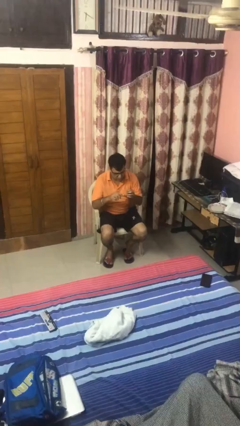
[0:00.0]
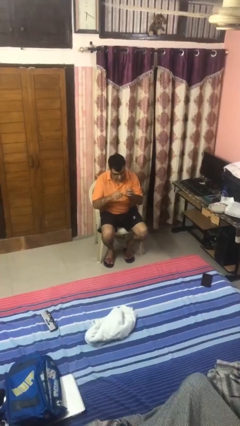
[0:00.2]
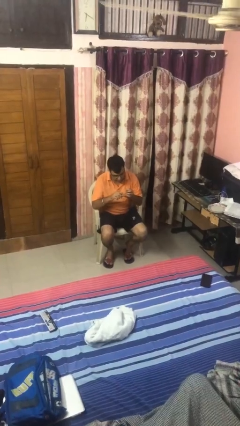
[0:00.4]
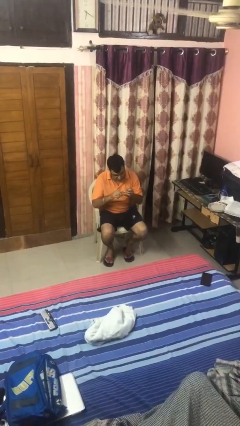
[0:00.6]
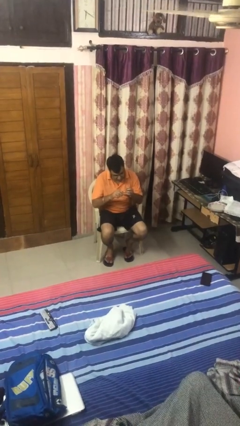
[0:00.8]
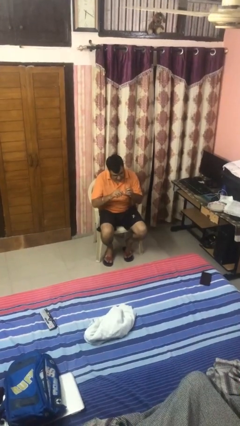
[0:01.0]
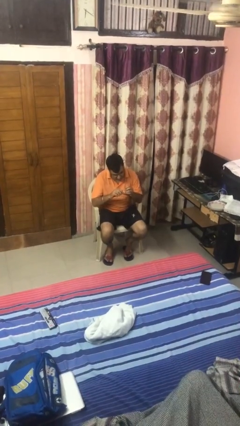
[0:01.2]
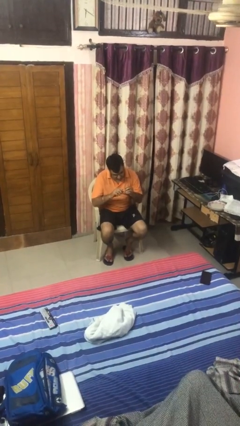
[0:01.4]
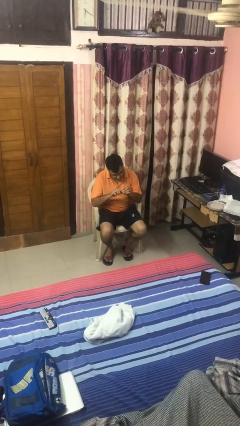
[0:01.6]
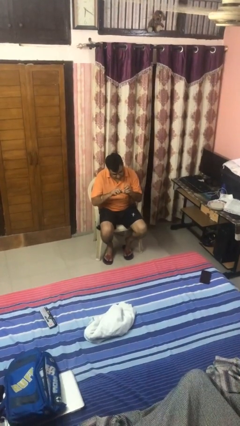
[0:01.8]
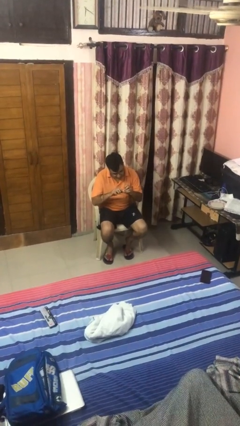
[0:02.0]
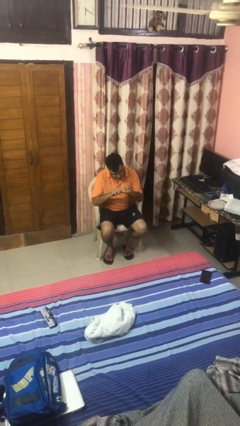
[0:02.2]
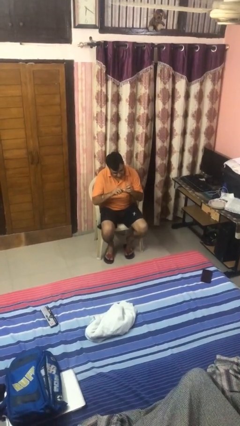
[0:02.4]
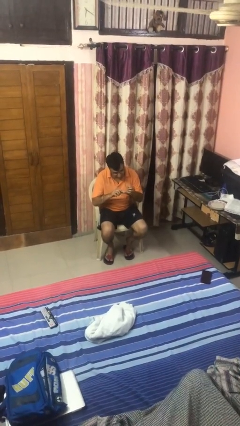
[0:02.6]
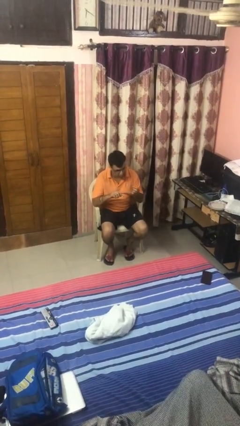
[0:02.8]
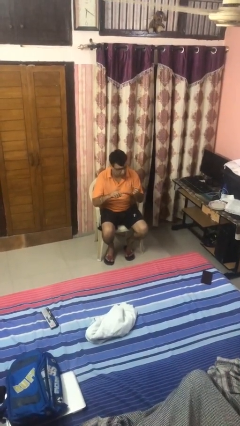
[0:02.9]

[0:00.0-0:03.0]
person clips fingernails

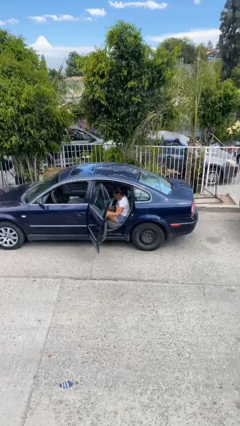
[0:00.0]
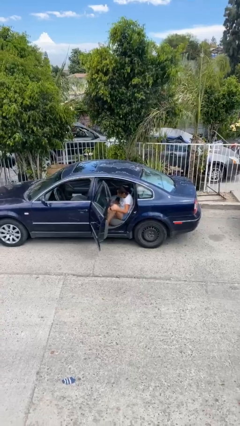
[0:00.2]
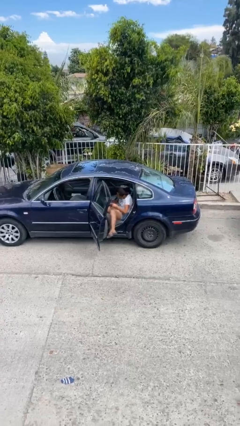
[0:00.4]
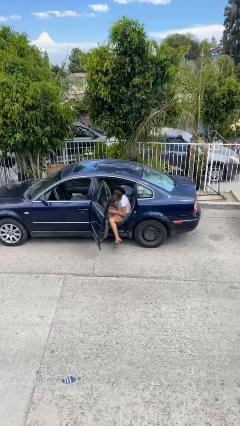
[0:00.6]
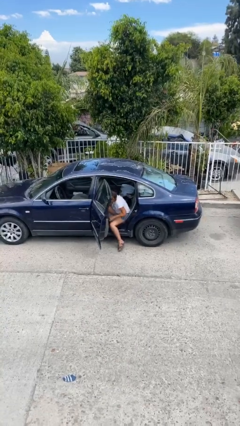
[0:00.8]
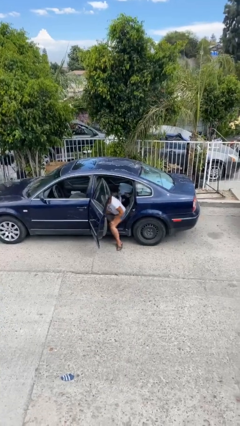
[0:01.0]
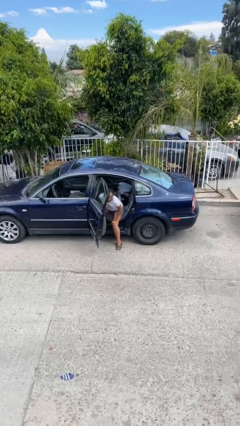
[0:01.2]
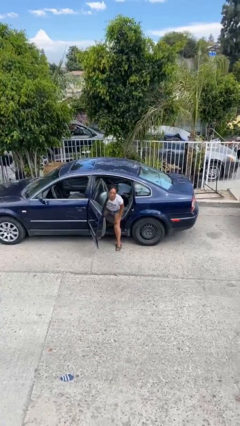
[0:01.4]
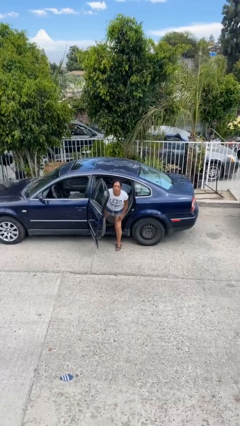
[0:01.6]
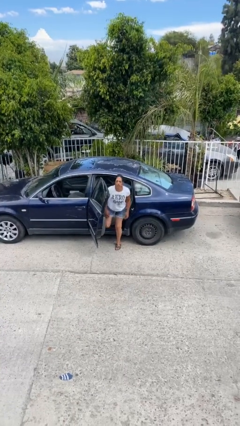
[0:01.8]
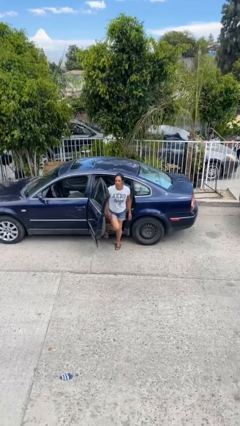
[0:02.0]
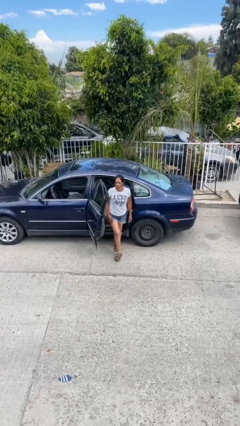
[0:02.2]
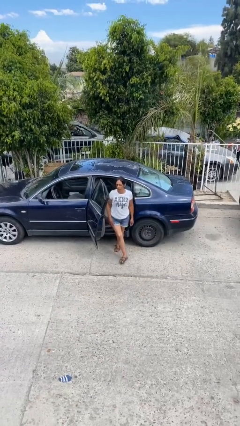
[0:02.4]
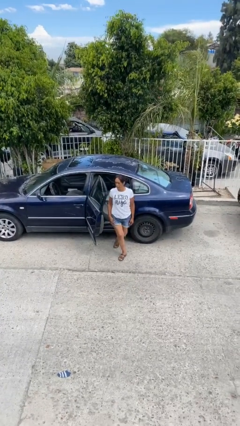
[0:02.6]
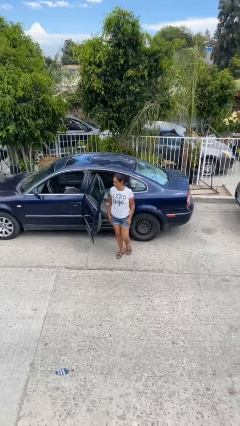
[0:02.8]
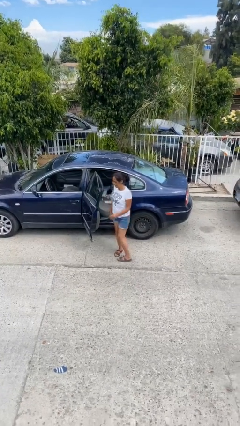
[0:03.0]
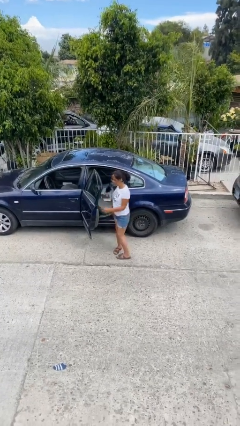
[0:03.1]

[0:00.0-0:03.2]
person exits car

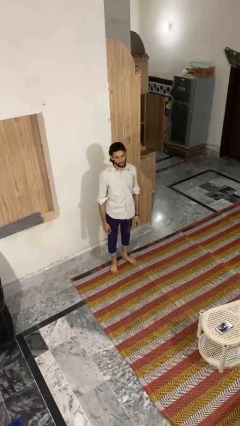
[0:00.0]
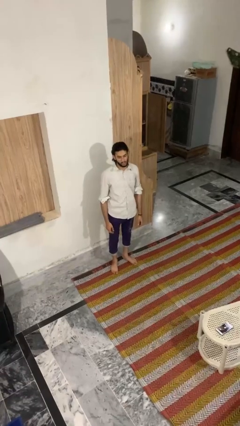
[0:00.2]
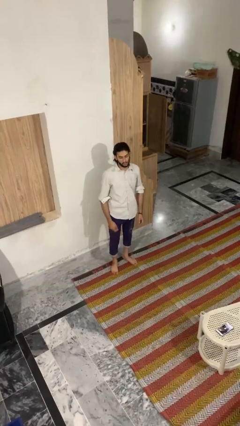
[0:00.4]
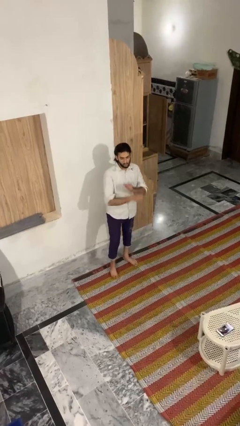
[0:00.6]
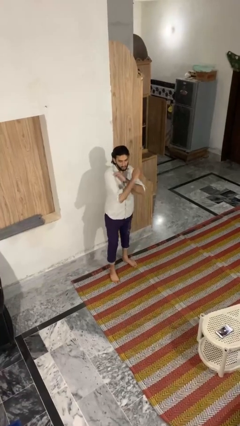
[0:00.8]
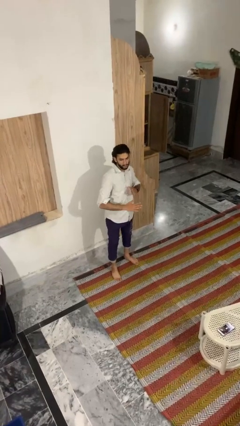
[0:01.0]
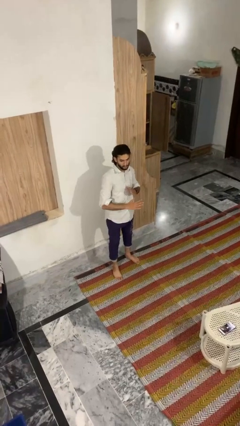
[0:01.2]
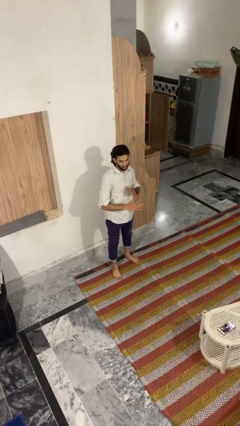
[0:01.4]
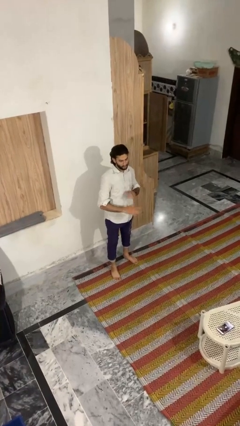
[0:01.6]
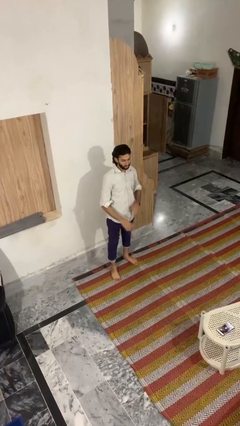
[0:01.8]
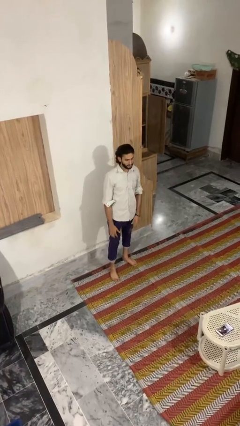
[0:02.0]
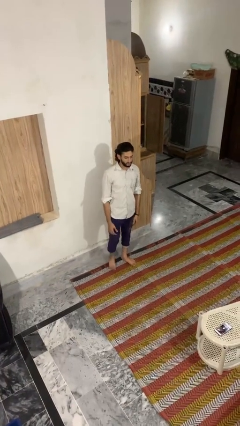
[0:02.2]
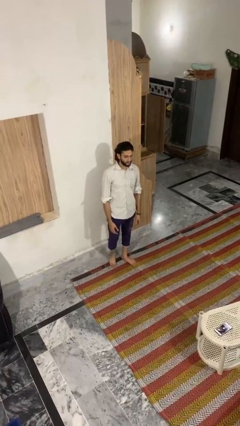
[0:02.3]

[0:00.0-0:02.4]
person karate chop

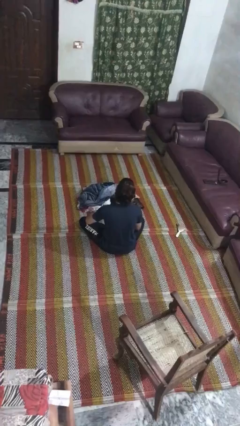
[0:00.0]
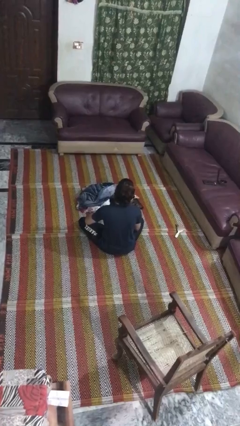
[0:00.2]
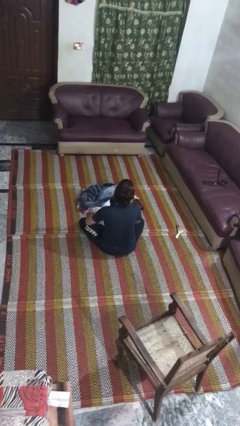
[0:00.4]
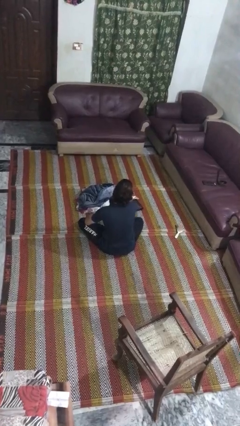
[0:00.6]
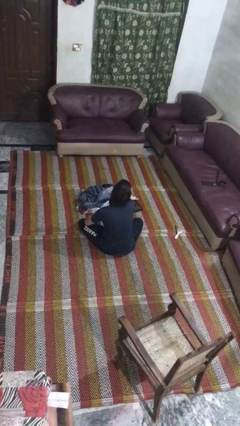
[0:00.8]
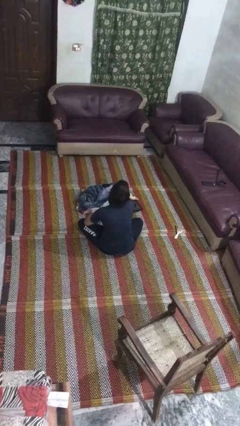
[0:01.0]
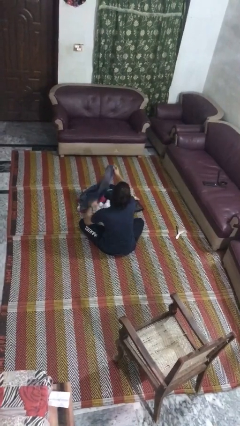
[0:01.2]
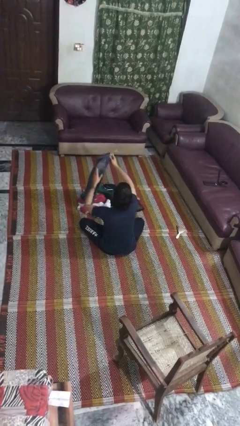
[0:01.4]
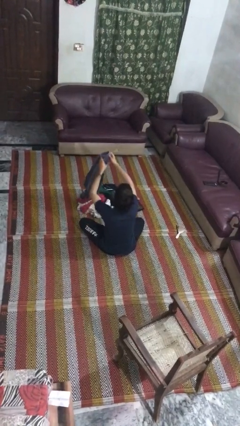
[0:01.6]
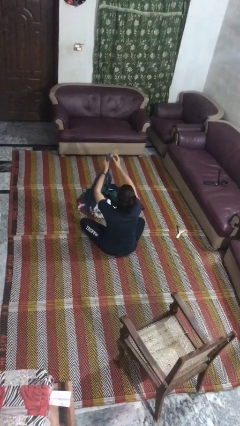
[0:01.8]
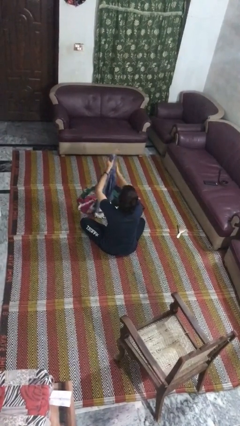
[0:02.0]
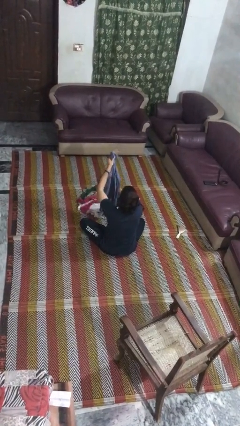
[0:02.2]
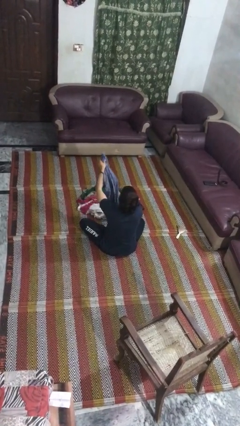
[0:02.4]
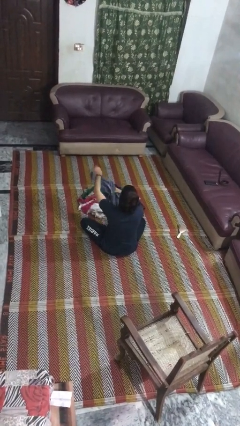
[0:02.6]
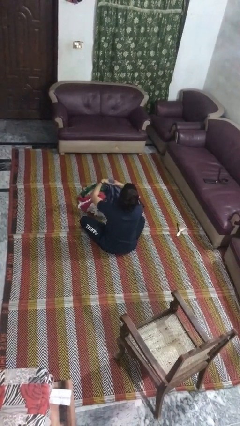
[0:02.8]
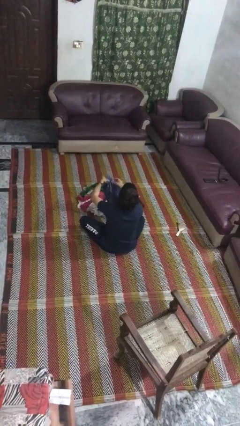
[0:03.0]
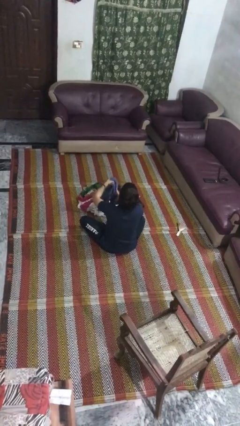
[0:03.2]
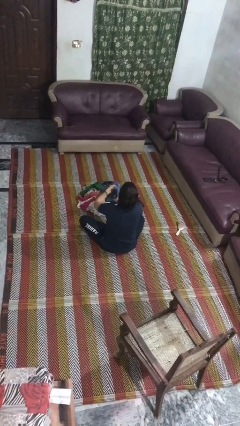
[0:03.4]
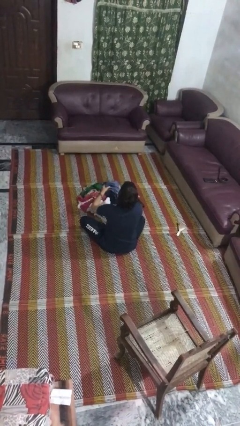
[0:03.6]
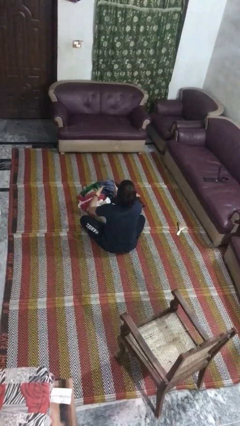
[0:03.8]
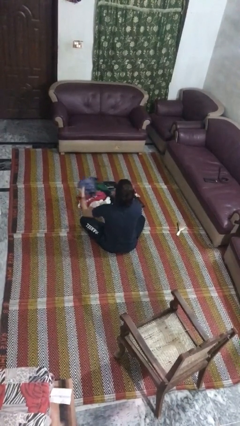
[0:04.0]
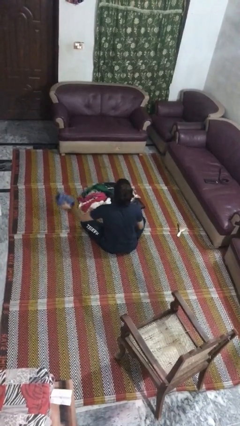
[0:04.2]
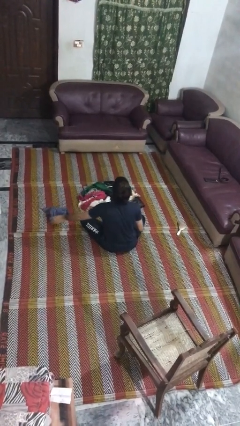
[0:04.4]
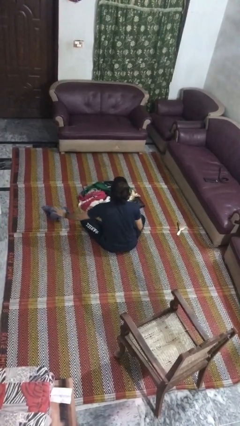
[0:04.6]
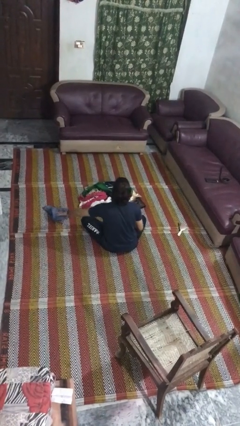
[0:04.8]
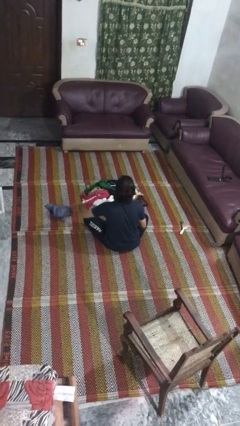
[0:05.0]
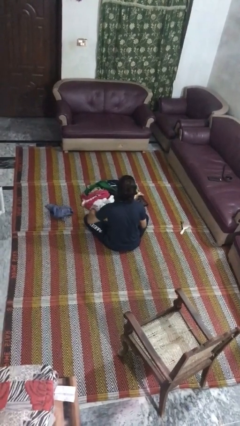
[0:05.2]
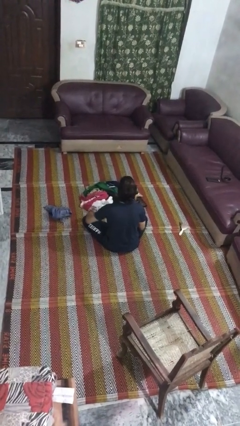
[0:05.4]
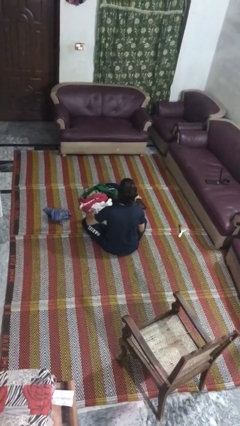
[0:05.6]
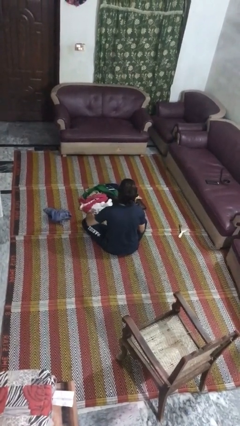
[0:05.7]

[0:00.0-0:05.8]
person folds shirt

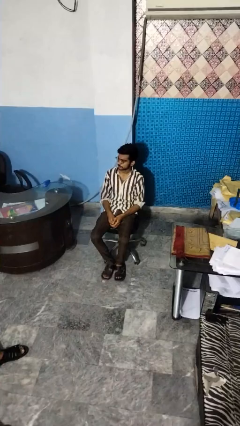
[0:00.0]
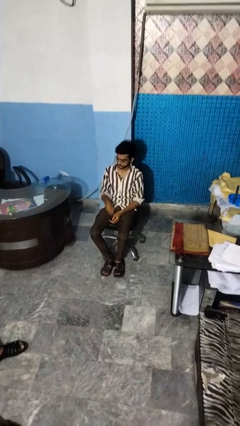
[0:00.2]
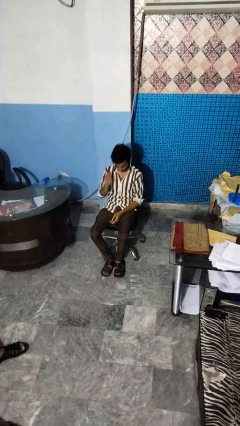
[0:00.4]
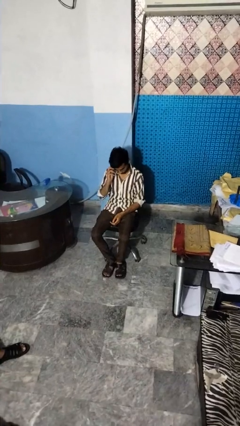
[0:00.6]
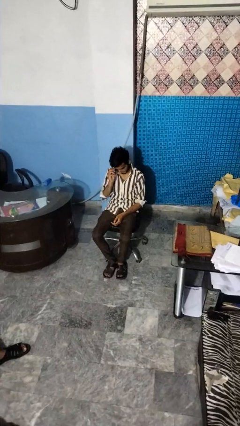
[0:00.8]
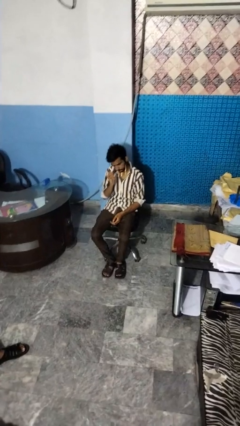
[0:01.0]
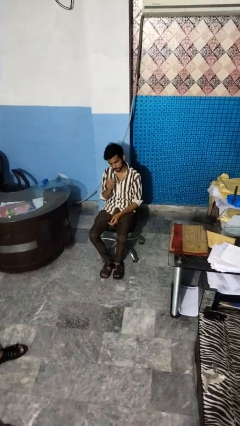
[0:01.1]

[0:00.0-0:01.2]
person takes off glasses

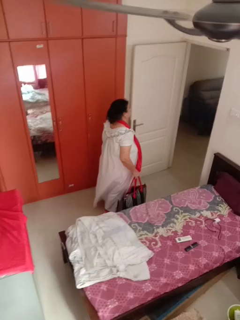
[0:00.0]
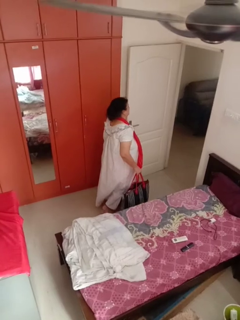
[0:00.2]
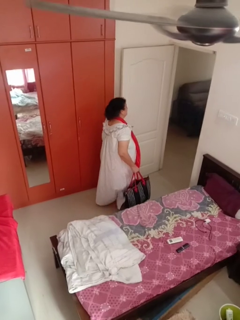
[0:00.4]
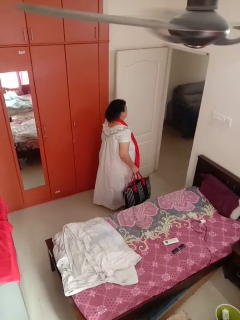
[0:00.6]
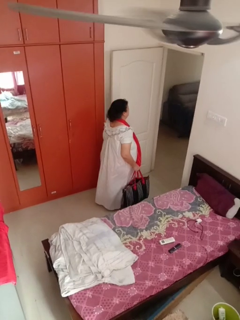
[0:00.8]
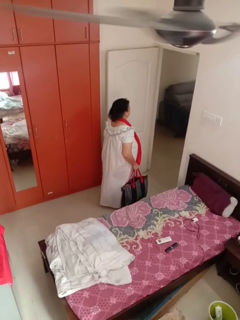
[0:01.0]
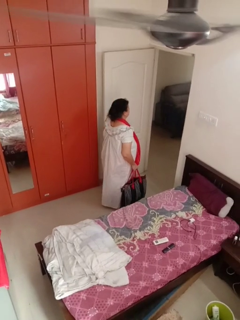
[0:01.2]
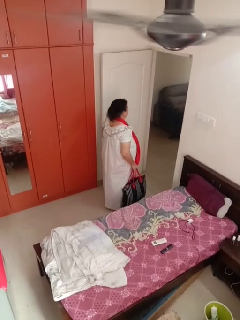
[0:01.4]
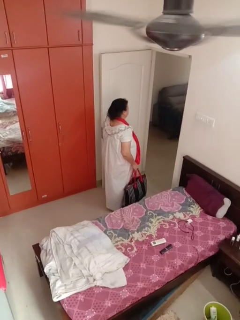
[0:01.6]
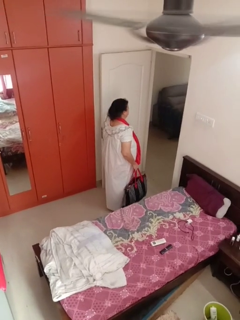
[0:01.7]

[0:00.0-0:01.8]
person carries groceries

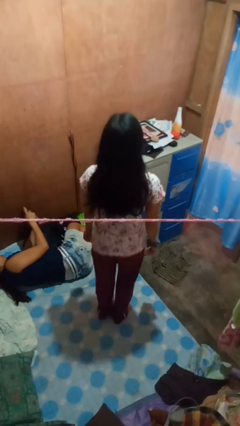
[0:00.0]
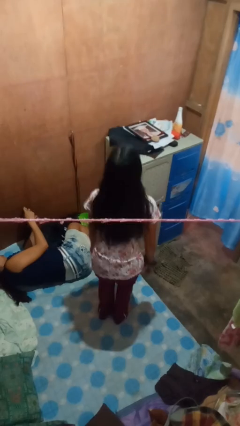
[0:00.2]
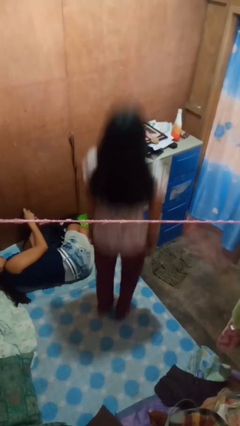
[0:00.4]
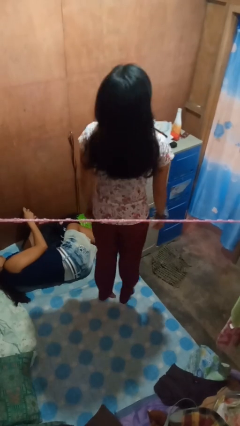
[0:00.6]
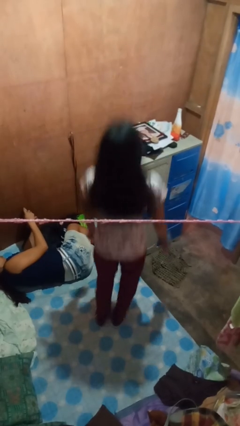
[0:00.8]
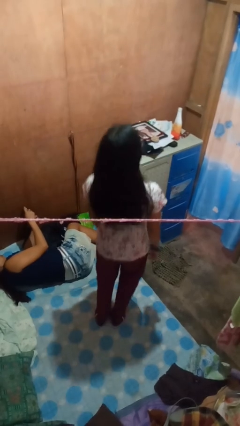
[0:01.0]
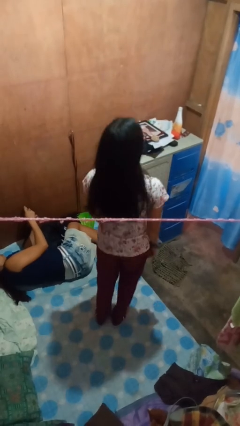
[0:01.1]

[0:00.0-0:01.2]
person jumps on bed
